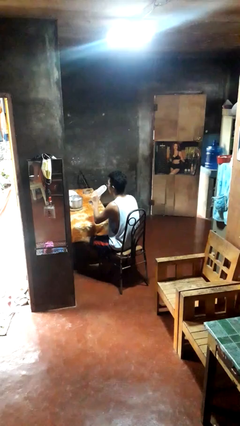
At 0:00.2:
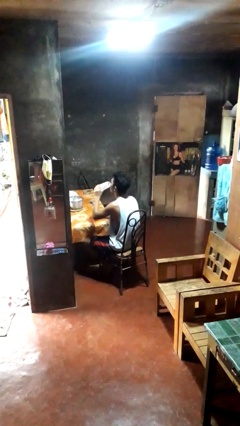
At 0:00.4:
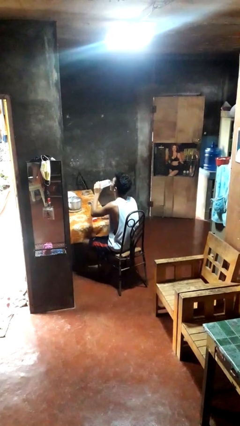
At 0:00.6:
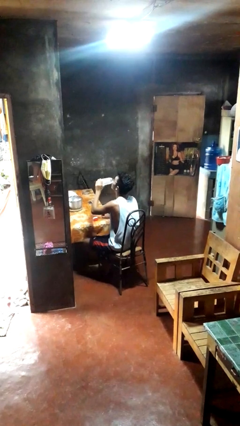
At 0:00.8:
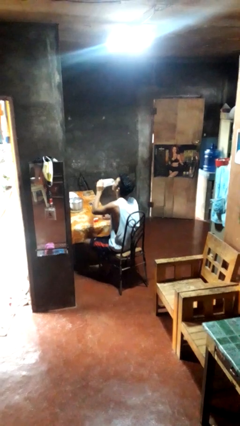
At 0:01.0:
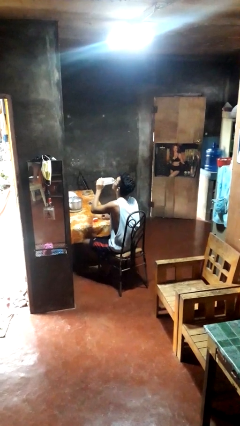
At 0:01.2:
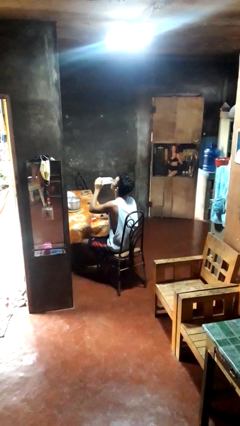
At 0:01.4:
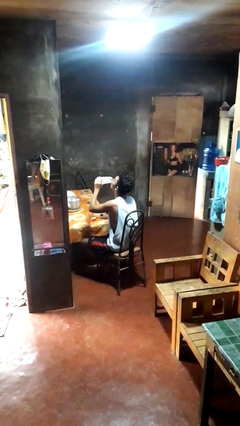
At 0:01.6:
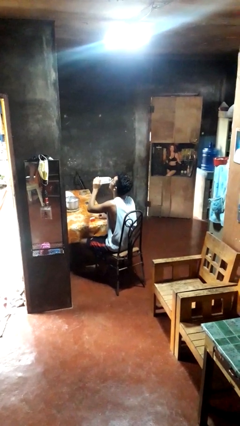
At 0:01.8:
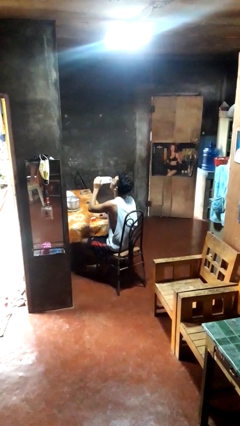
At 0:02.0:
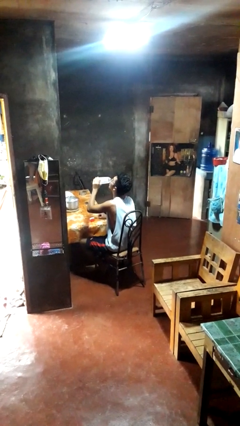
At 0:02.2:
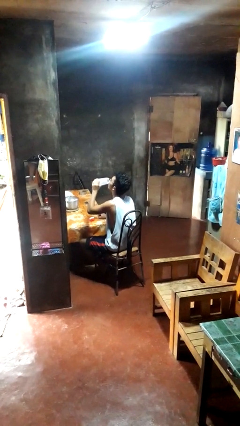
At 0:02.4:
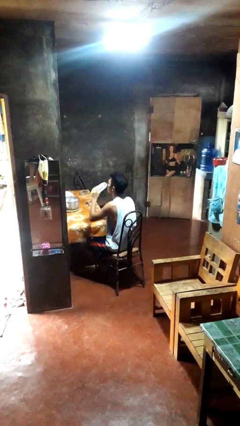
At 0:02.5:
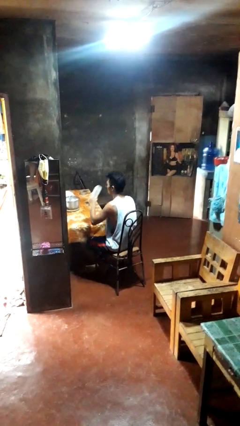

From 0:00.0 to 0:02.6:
person drinks from bottle

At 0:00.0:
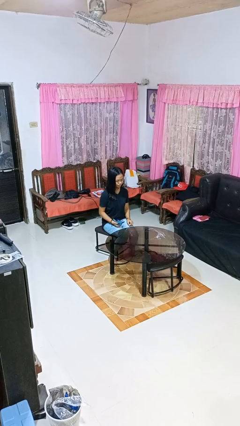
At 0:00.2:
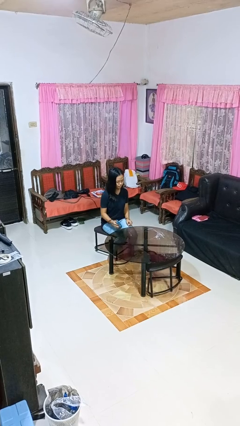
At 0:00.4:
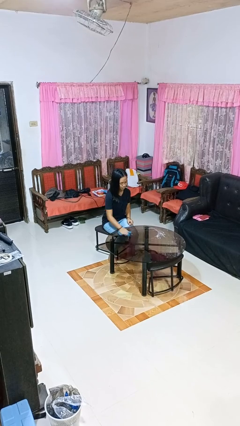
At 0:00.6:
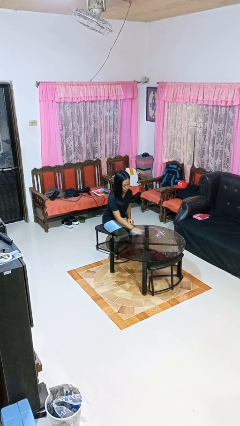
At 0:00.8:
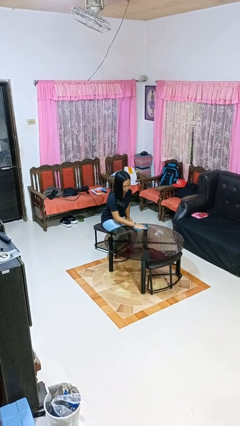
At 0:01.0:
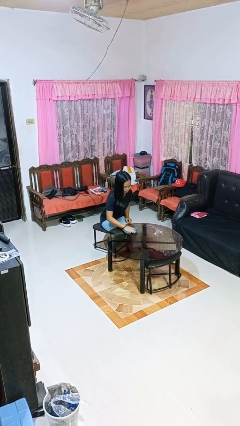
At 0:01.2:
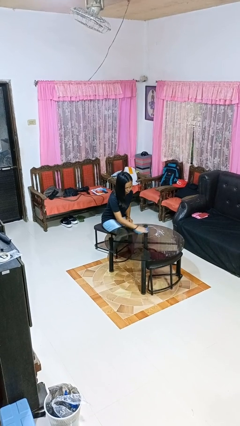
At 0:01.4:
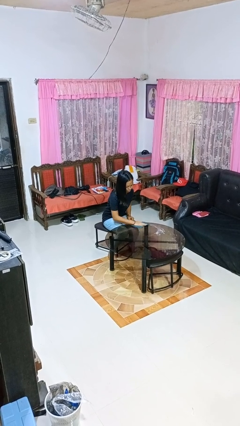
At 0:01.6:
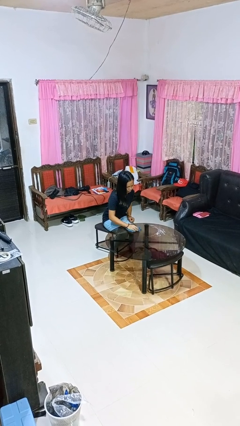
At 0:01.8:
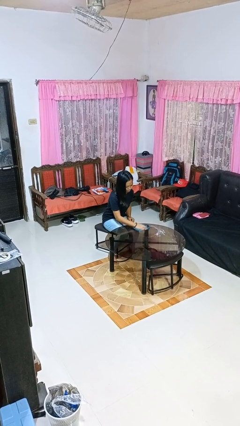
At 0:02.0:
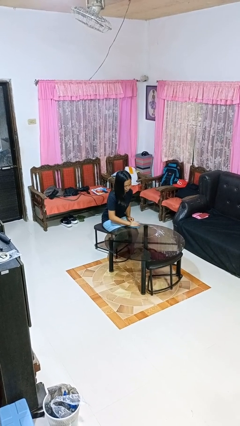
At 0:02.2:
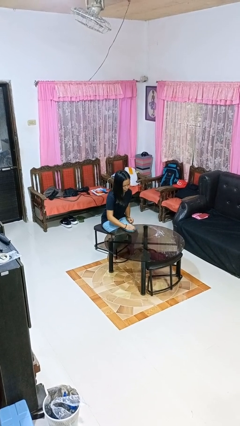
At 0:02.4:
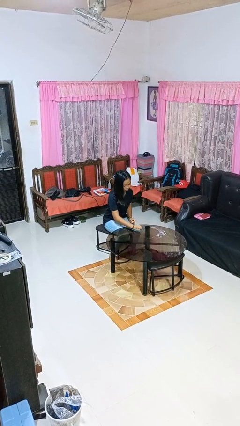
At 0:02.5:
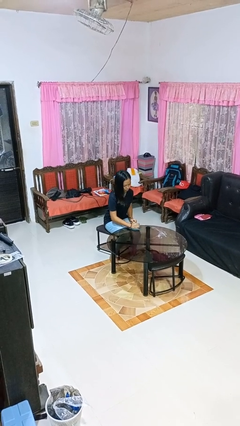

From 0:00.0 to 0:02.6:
person cleans table with rag

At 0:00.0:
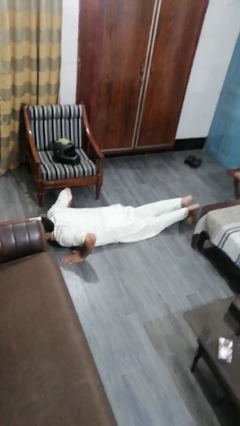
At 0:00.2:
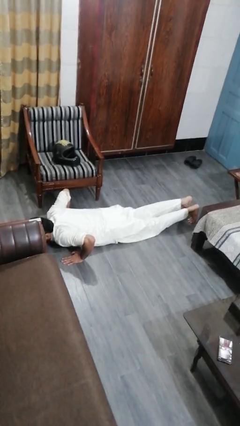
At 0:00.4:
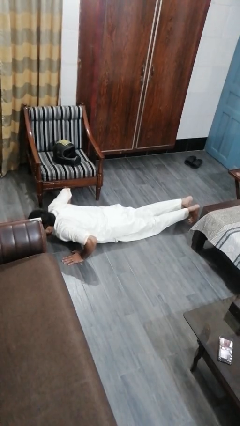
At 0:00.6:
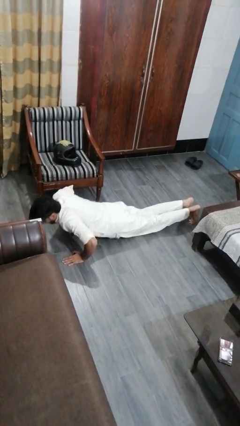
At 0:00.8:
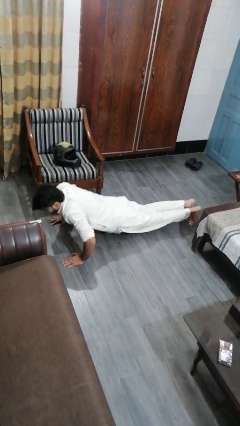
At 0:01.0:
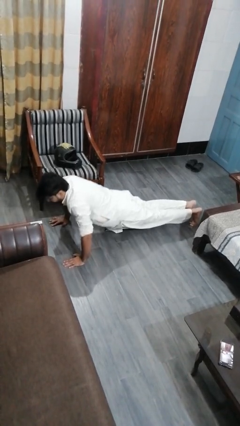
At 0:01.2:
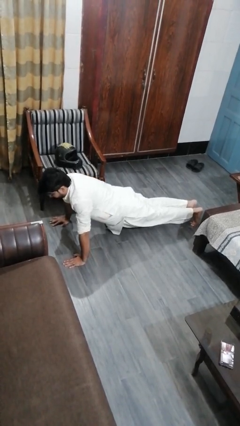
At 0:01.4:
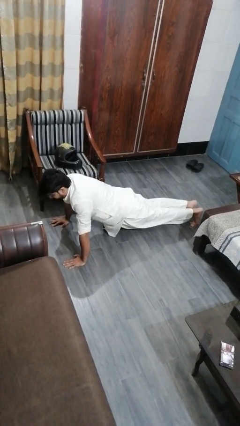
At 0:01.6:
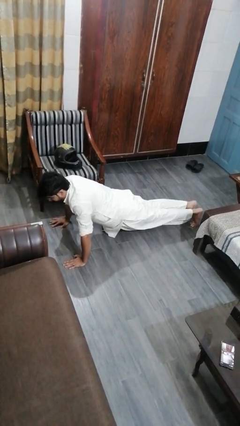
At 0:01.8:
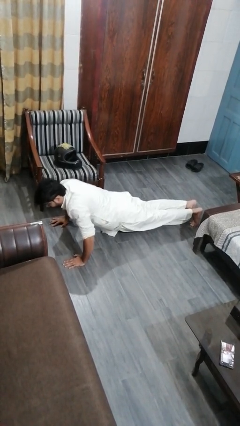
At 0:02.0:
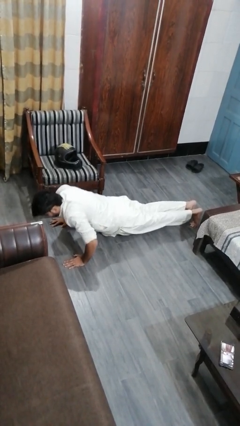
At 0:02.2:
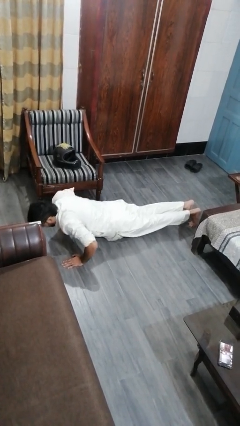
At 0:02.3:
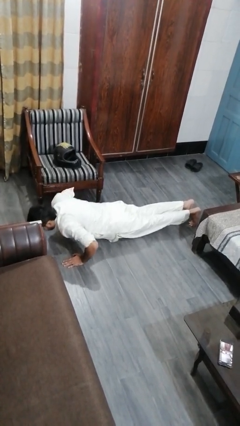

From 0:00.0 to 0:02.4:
person exercises with pushup

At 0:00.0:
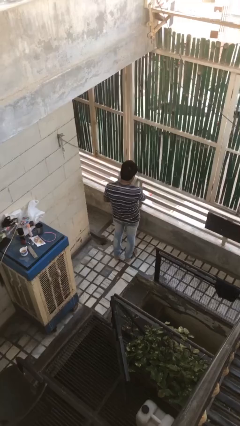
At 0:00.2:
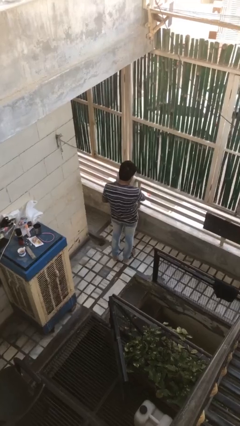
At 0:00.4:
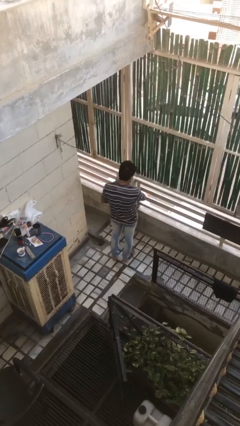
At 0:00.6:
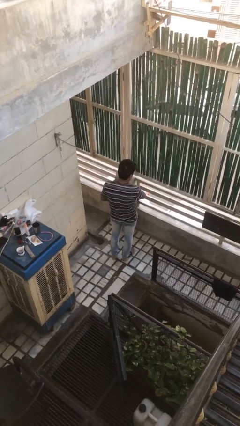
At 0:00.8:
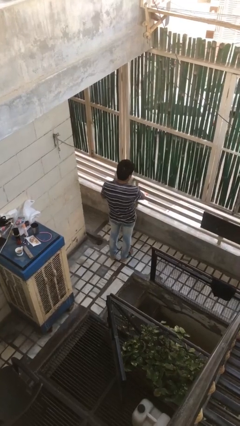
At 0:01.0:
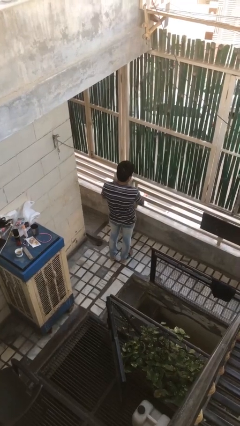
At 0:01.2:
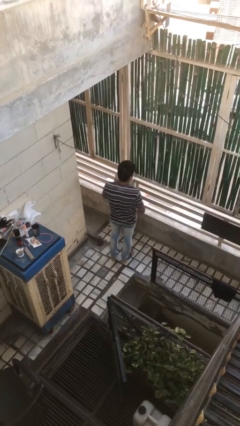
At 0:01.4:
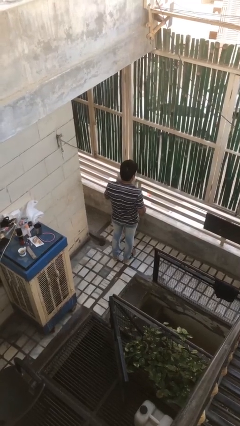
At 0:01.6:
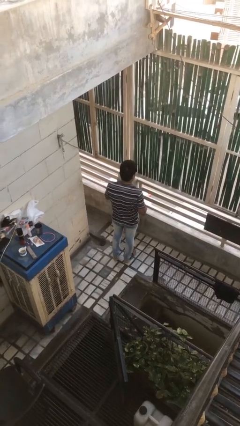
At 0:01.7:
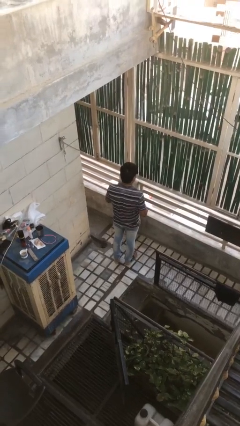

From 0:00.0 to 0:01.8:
person takes off wristwatch

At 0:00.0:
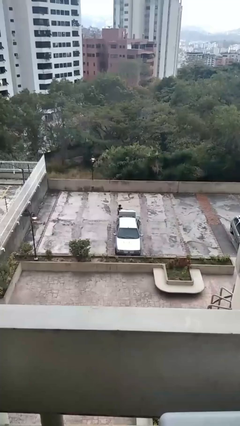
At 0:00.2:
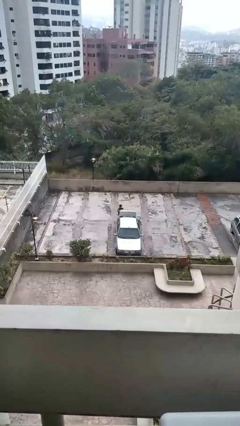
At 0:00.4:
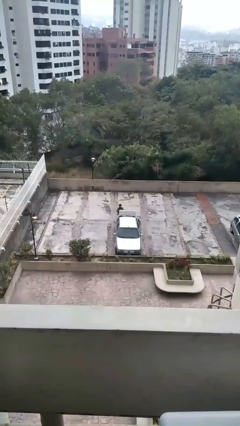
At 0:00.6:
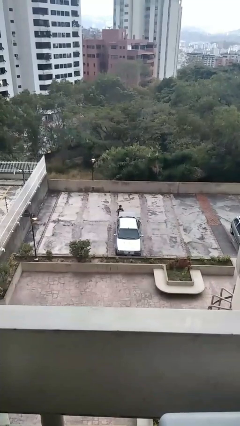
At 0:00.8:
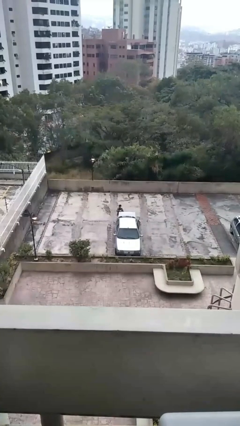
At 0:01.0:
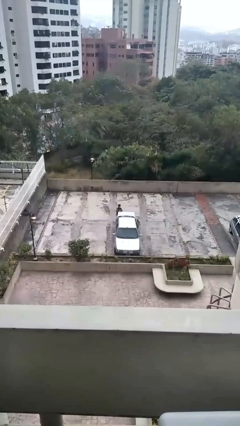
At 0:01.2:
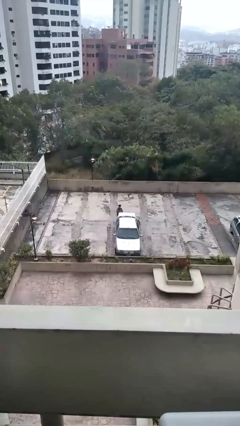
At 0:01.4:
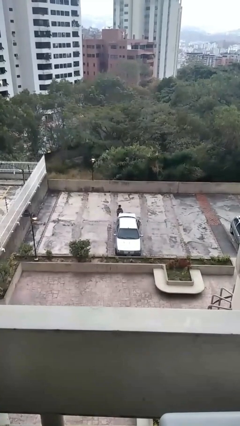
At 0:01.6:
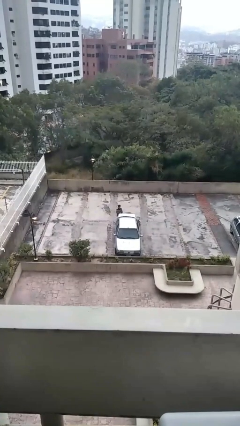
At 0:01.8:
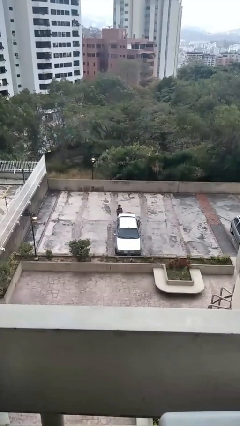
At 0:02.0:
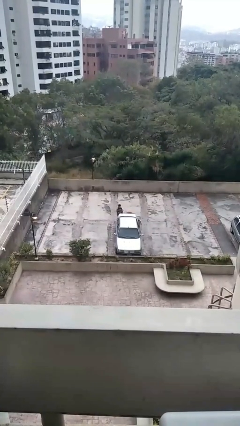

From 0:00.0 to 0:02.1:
person closes car trunk

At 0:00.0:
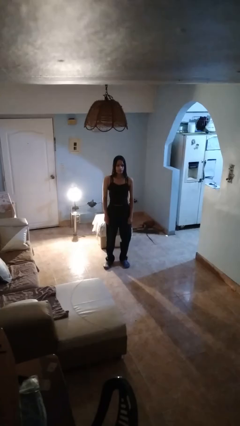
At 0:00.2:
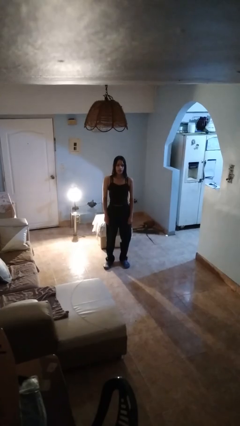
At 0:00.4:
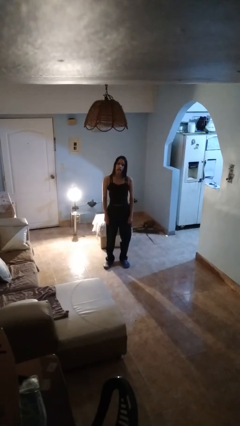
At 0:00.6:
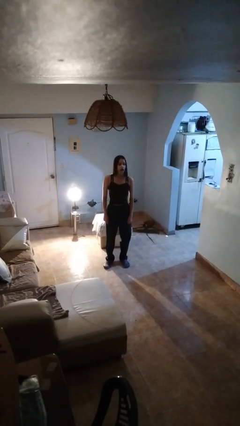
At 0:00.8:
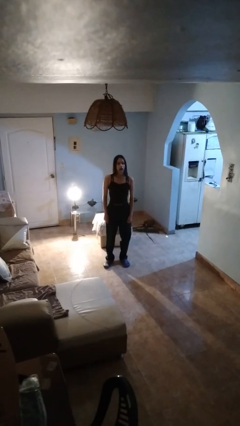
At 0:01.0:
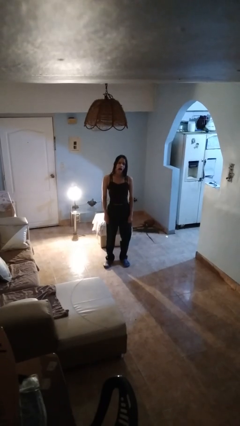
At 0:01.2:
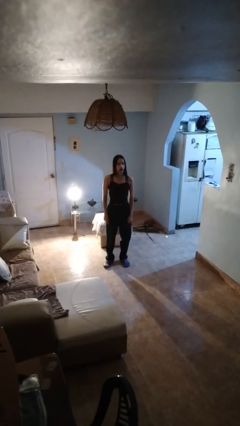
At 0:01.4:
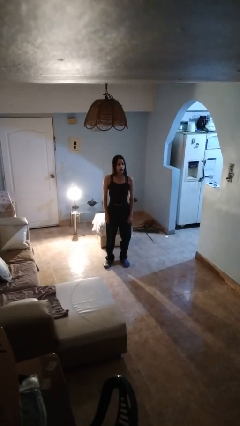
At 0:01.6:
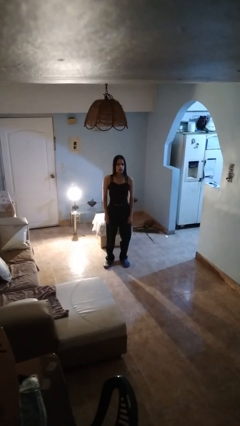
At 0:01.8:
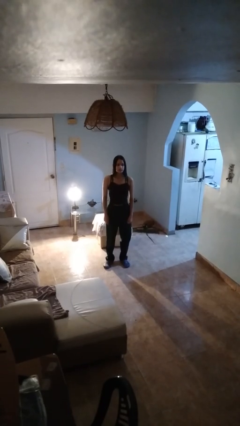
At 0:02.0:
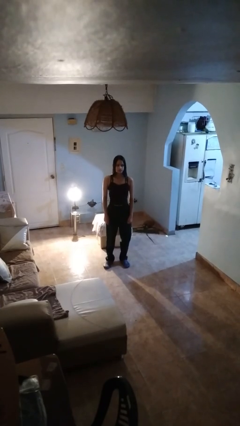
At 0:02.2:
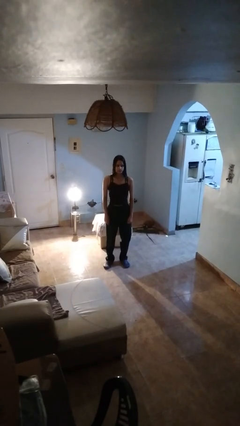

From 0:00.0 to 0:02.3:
person sticks out tongue

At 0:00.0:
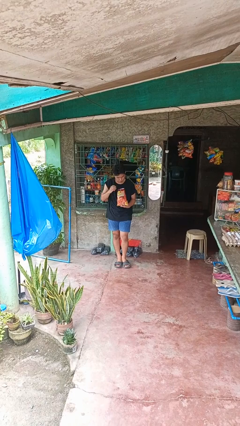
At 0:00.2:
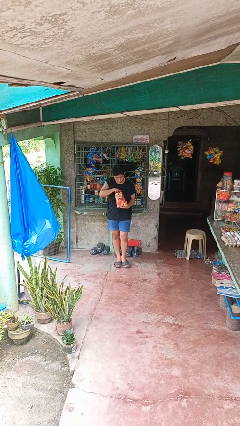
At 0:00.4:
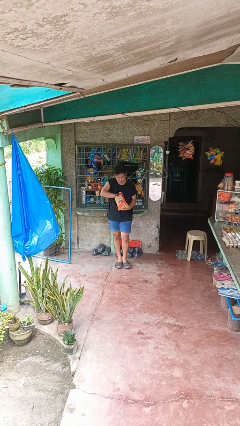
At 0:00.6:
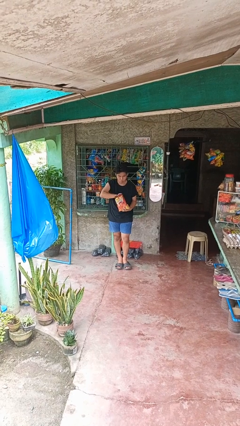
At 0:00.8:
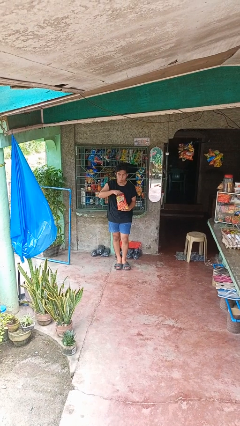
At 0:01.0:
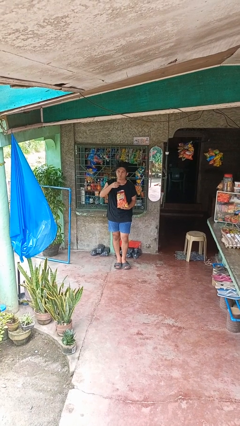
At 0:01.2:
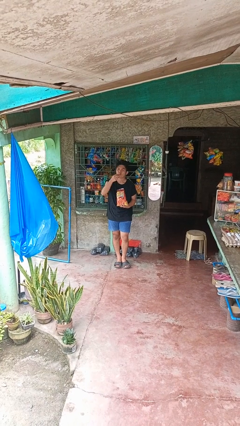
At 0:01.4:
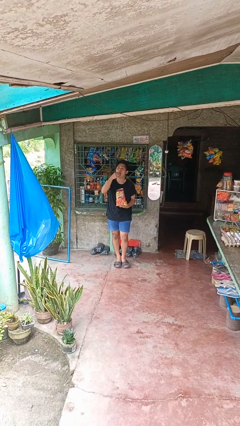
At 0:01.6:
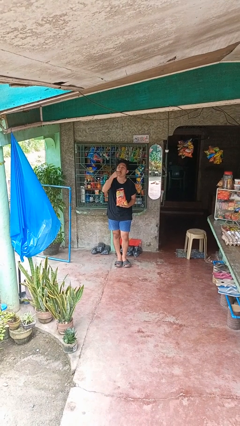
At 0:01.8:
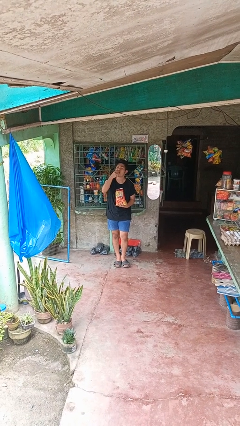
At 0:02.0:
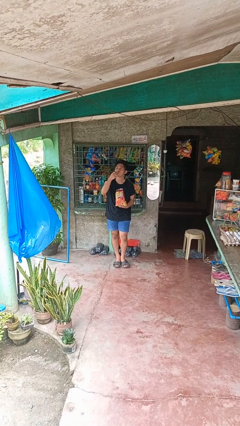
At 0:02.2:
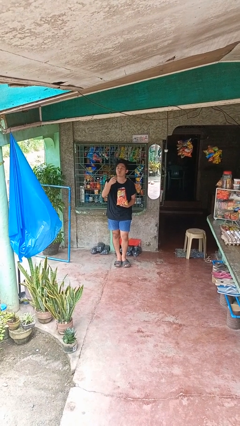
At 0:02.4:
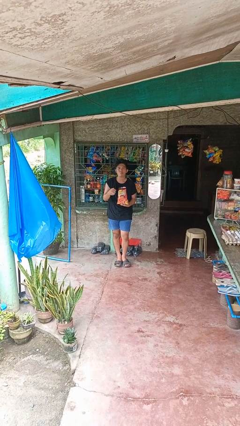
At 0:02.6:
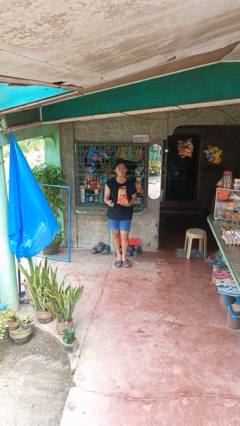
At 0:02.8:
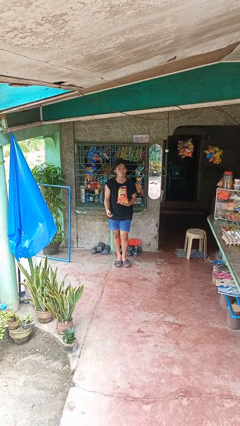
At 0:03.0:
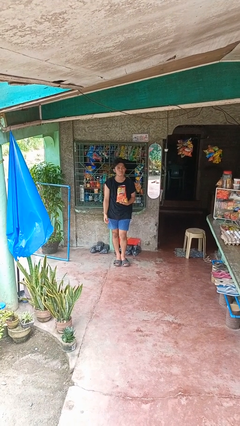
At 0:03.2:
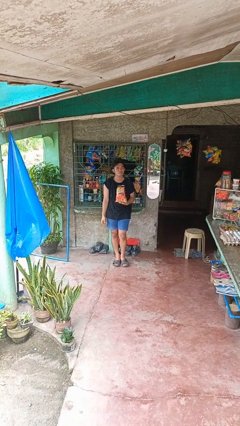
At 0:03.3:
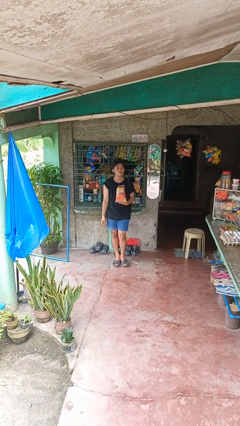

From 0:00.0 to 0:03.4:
person eats snack from bag

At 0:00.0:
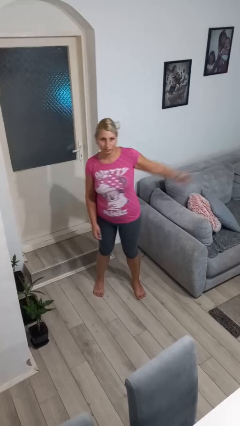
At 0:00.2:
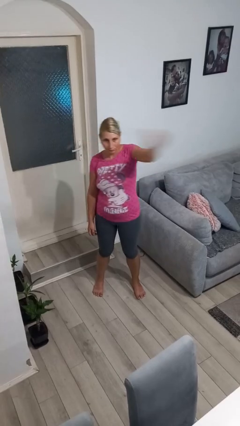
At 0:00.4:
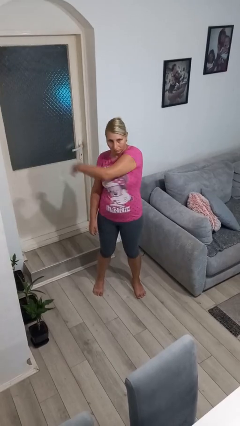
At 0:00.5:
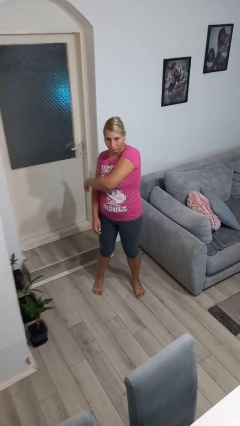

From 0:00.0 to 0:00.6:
person punches
